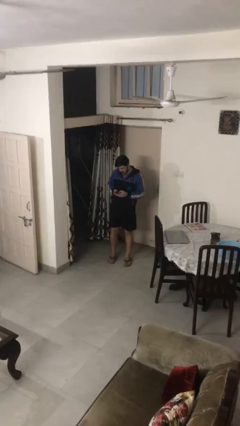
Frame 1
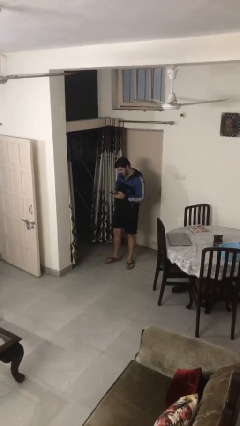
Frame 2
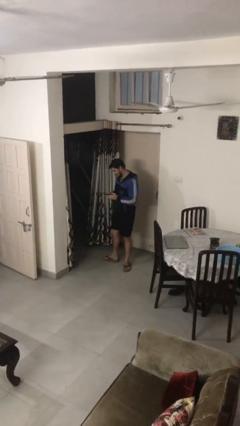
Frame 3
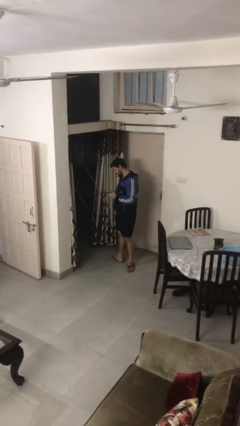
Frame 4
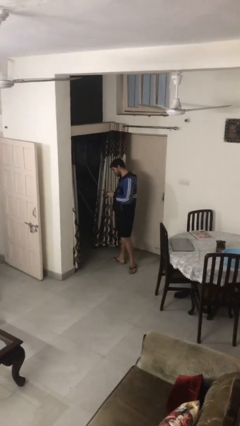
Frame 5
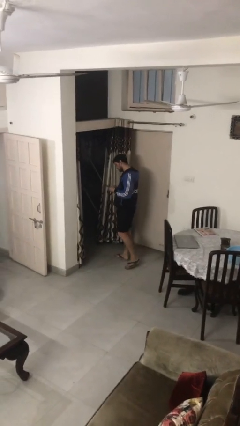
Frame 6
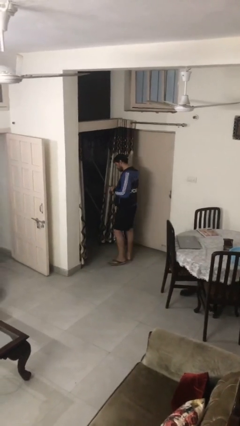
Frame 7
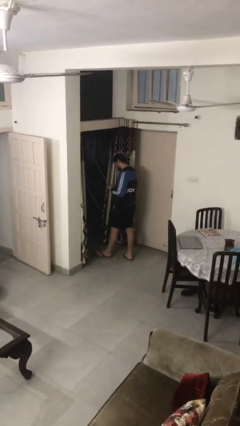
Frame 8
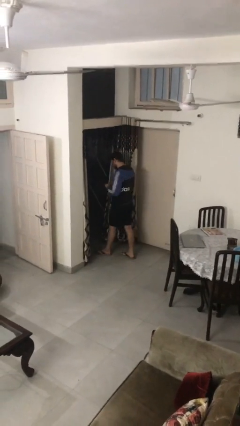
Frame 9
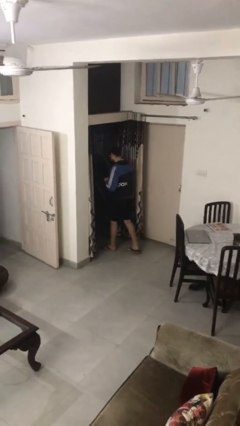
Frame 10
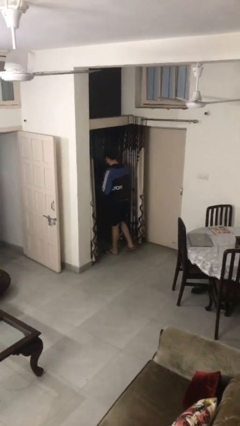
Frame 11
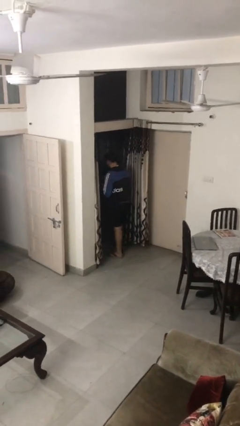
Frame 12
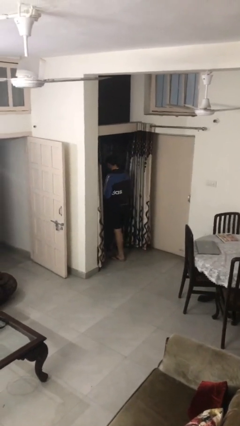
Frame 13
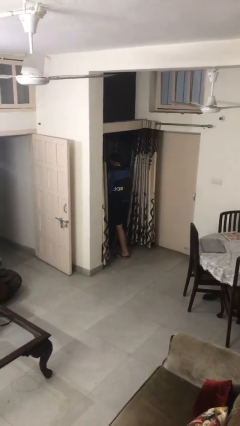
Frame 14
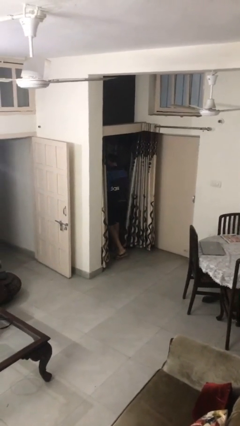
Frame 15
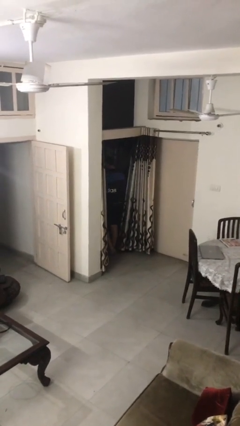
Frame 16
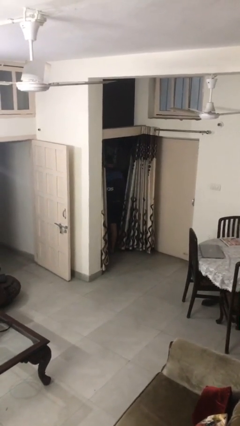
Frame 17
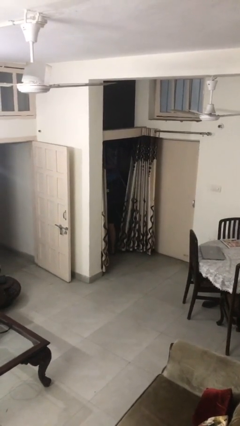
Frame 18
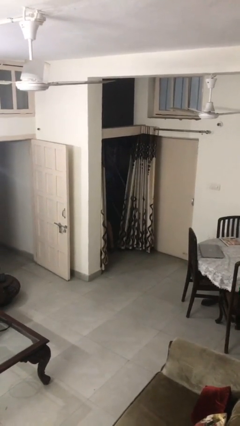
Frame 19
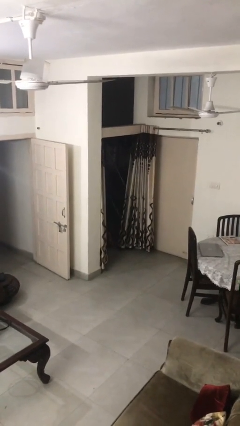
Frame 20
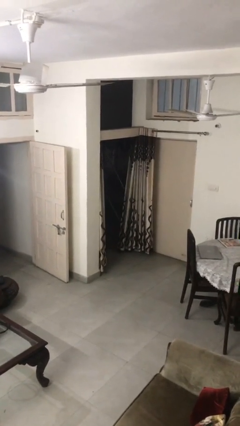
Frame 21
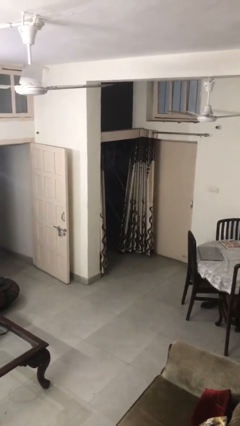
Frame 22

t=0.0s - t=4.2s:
person exits scene through structure

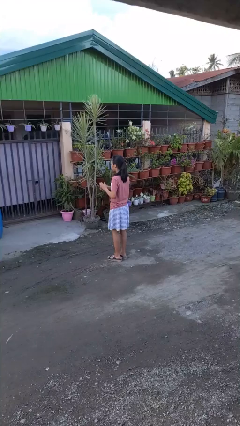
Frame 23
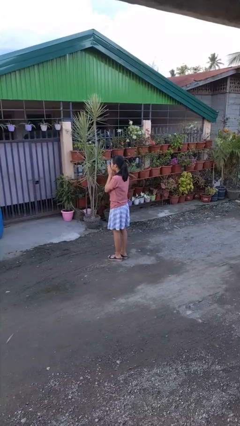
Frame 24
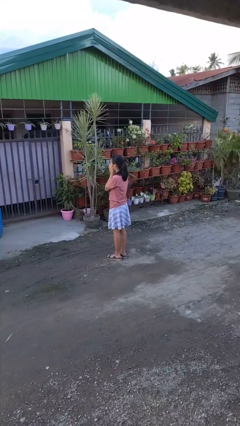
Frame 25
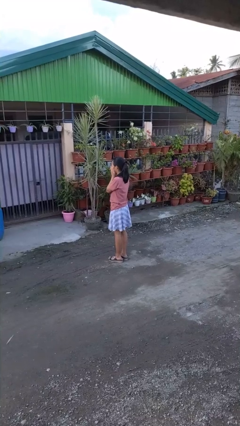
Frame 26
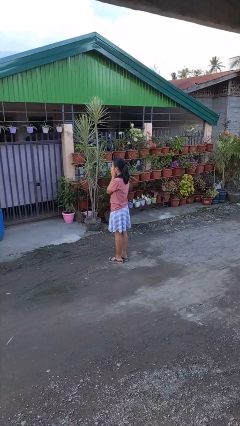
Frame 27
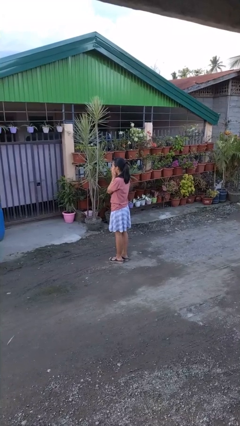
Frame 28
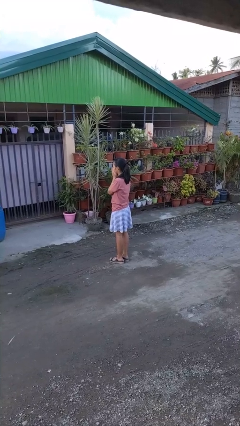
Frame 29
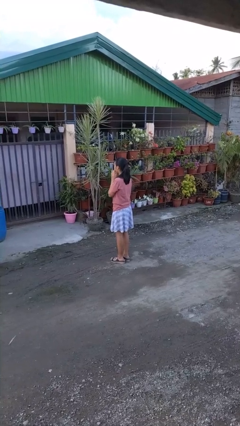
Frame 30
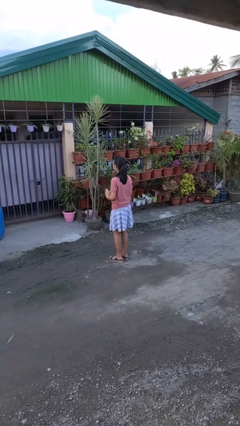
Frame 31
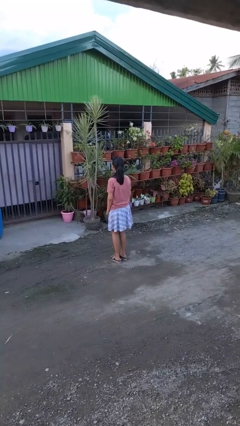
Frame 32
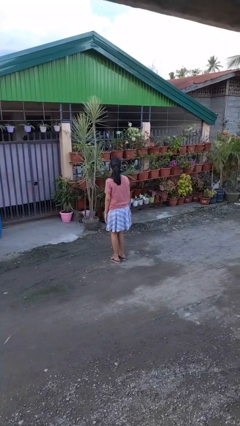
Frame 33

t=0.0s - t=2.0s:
person blows into hands

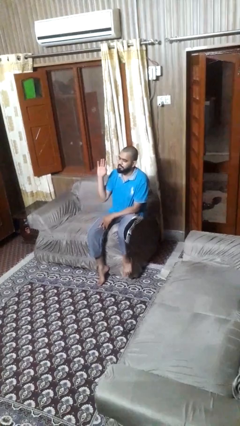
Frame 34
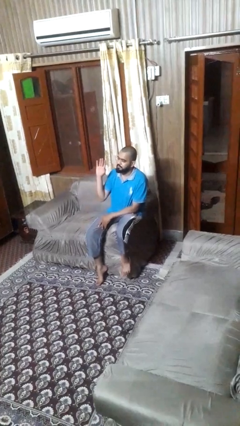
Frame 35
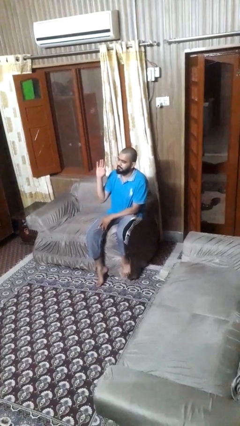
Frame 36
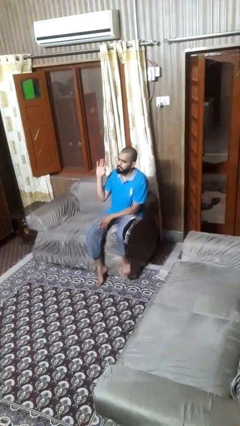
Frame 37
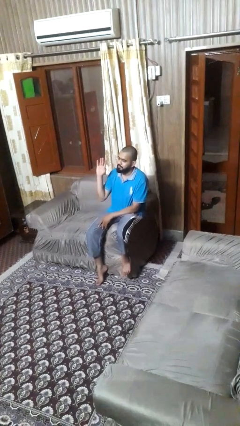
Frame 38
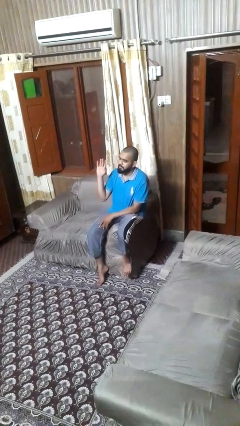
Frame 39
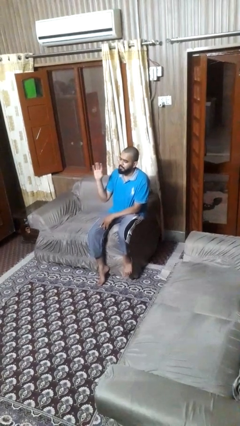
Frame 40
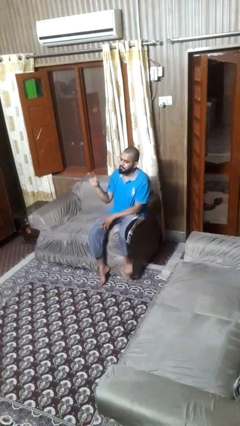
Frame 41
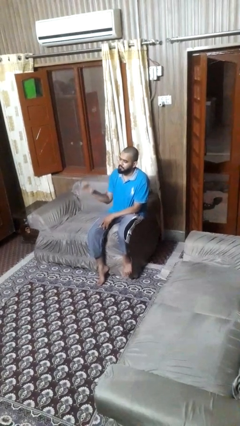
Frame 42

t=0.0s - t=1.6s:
person gestures raise hand

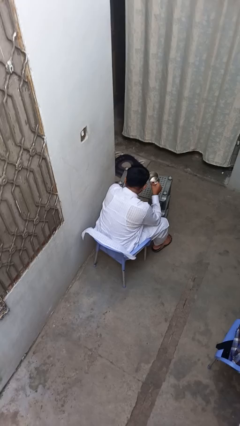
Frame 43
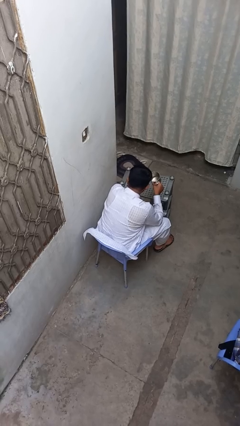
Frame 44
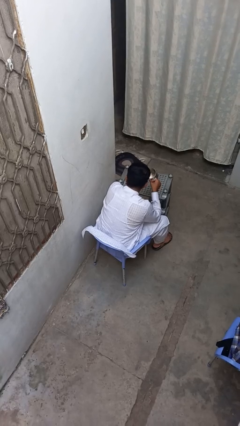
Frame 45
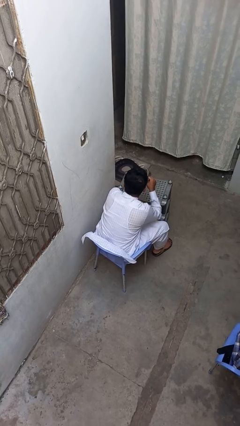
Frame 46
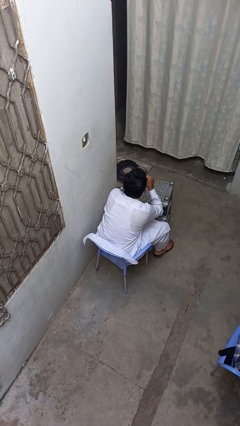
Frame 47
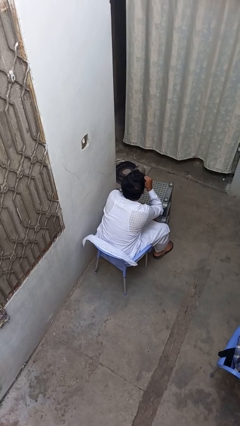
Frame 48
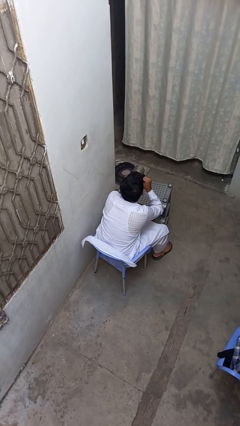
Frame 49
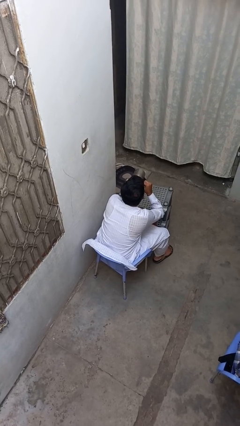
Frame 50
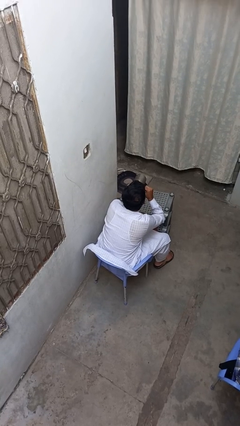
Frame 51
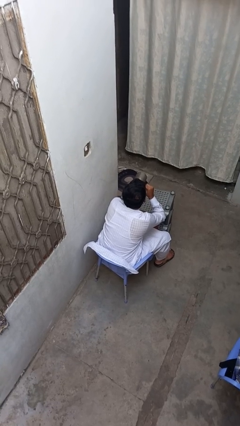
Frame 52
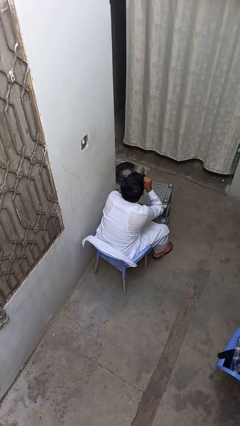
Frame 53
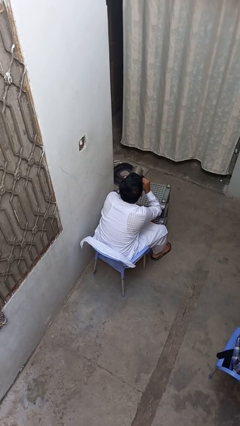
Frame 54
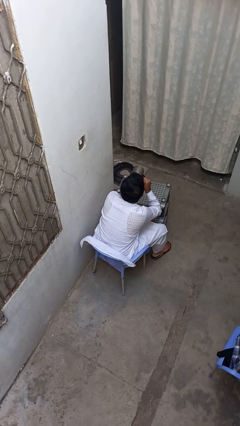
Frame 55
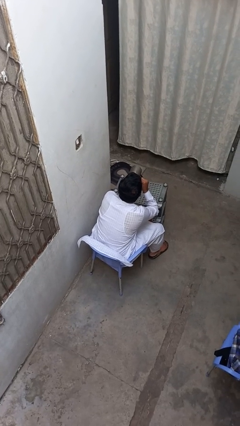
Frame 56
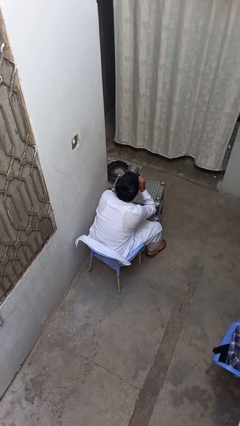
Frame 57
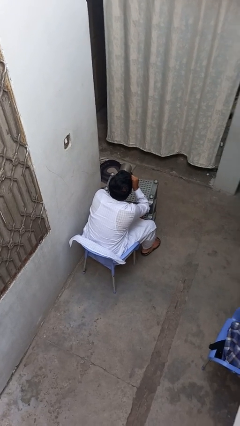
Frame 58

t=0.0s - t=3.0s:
person drinks from mug

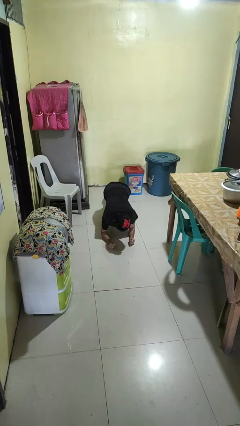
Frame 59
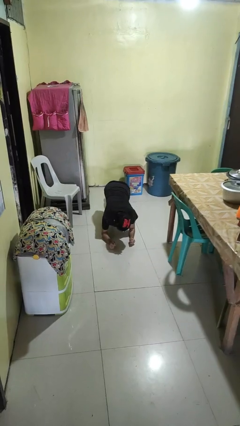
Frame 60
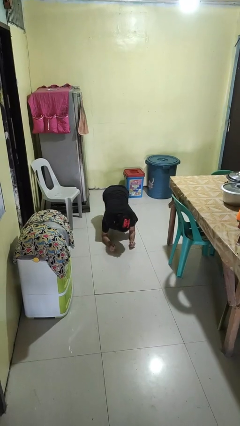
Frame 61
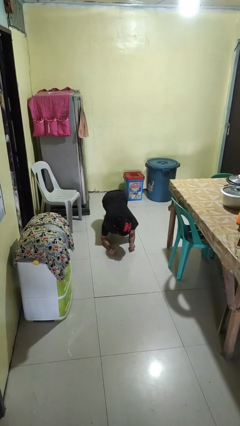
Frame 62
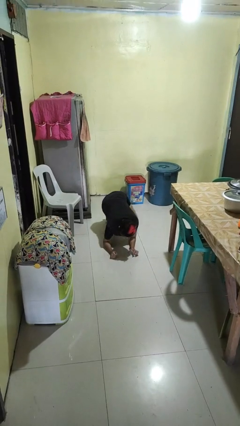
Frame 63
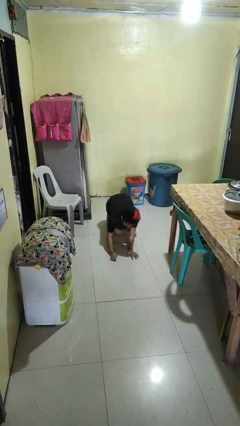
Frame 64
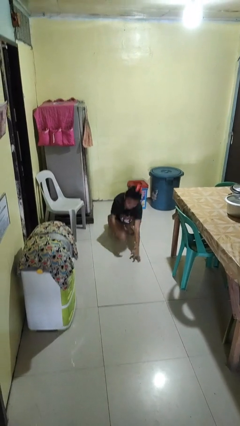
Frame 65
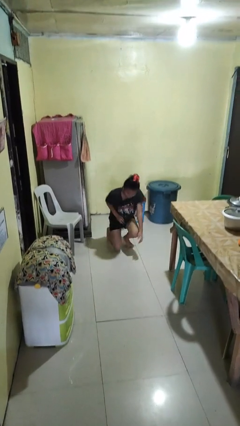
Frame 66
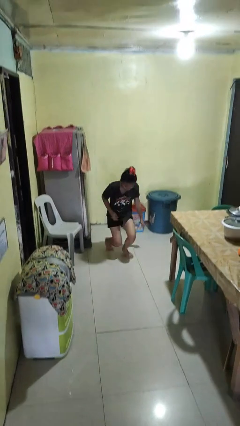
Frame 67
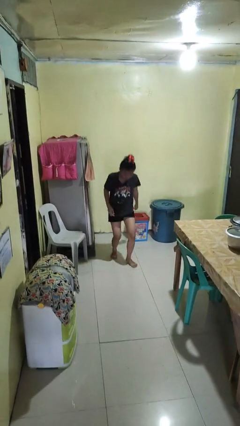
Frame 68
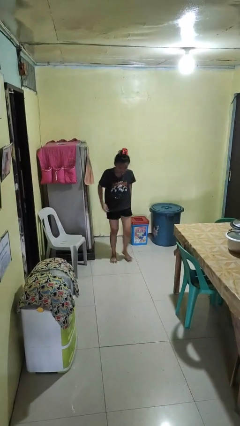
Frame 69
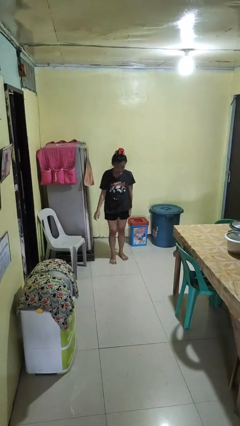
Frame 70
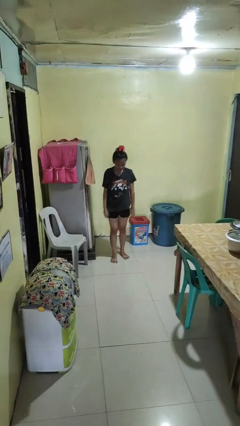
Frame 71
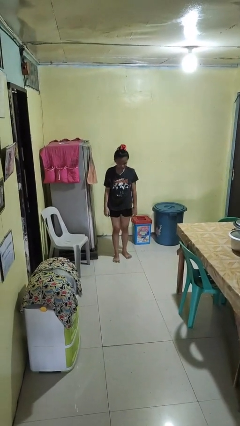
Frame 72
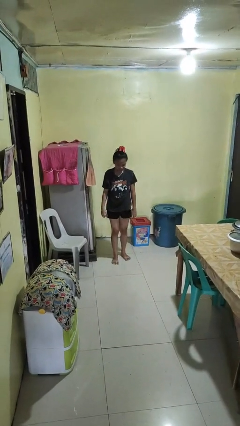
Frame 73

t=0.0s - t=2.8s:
person stands up from floor

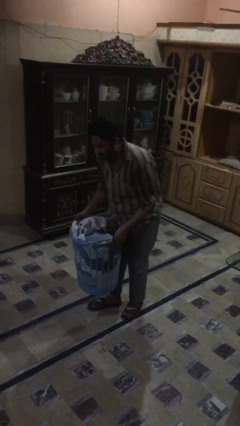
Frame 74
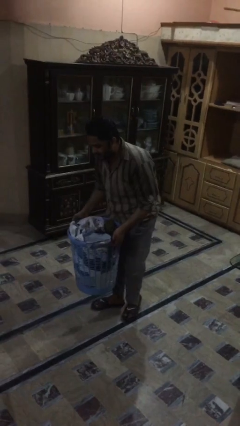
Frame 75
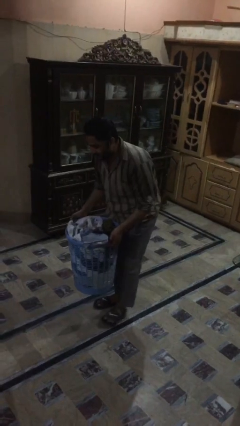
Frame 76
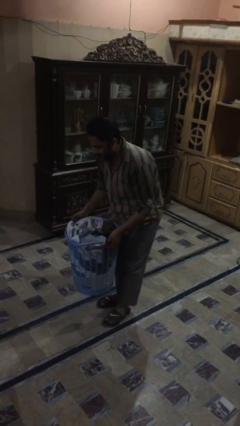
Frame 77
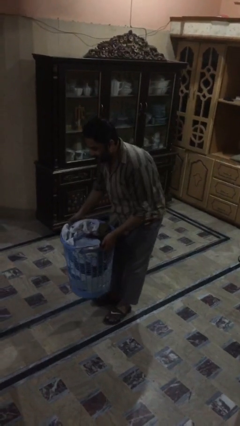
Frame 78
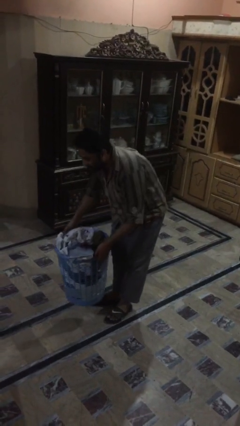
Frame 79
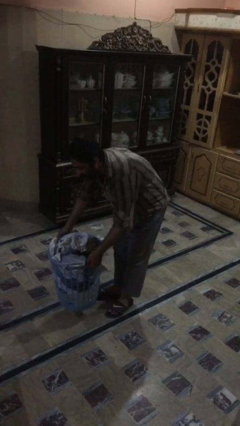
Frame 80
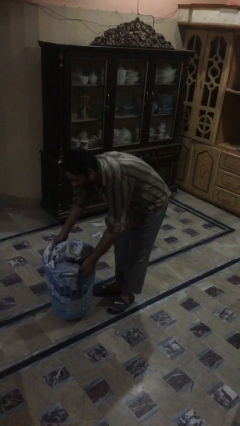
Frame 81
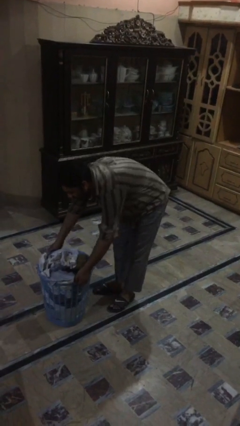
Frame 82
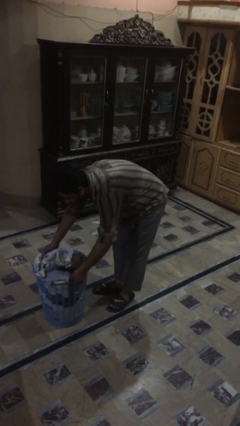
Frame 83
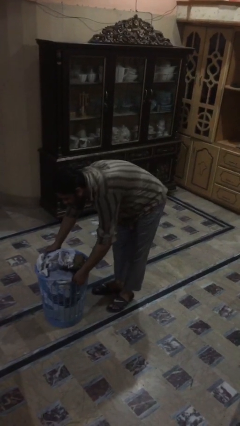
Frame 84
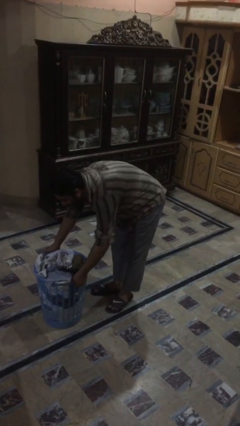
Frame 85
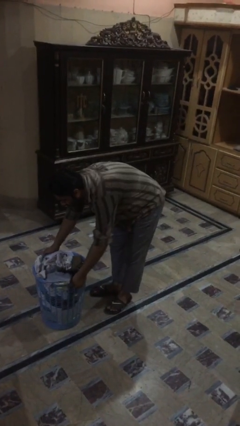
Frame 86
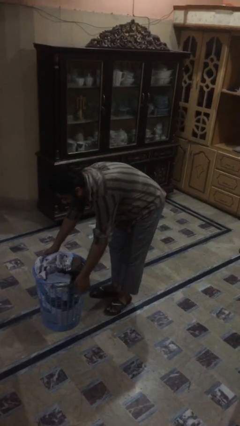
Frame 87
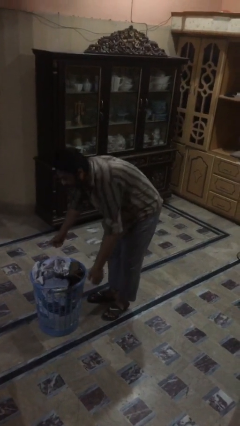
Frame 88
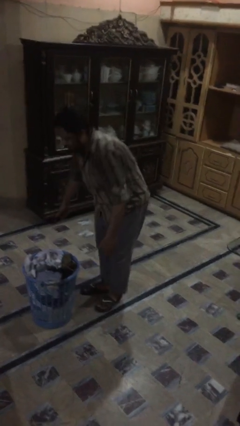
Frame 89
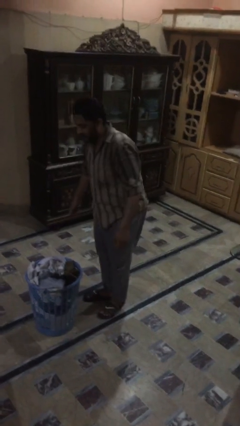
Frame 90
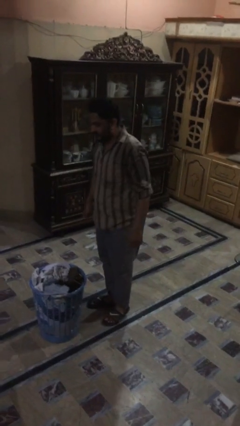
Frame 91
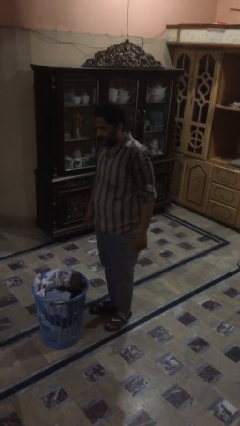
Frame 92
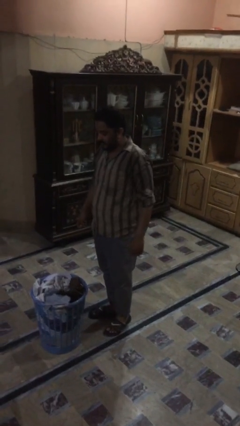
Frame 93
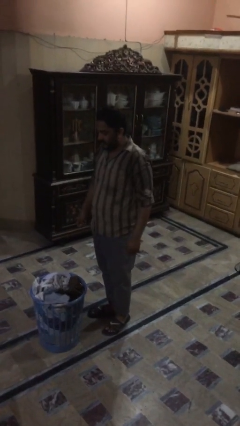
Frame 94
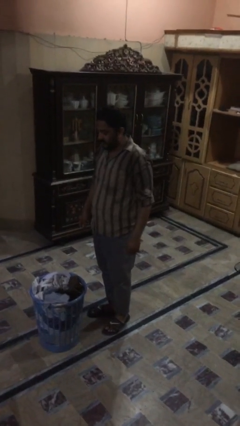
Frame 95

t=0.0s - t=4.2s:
person puts down object on floor
